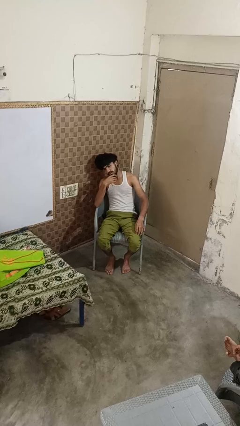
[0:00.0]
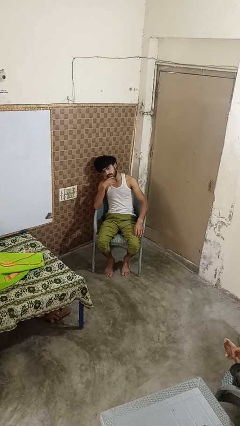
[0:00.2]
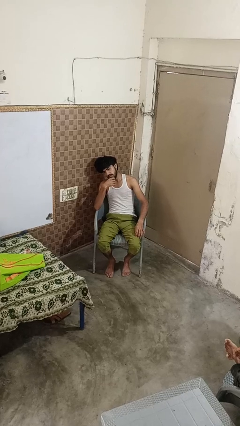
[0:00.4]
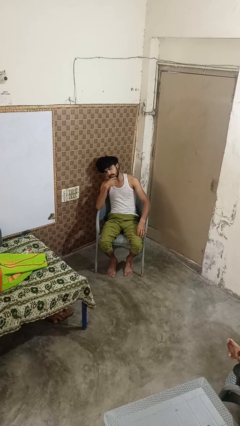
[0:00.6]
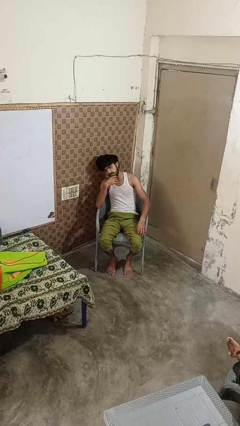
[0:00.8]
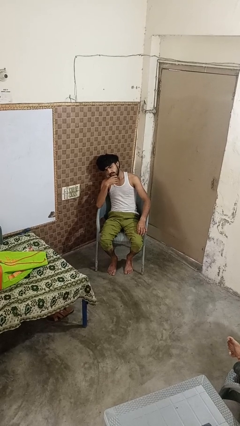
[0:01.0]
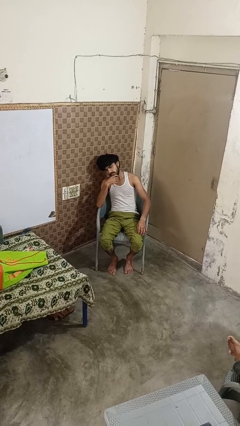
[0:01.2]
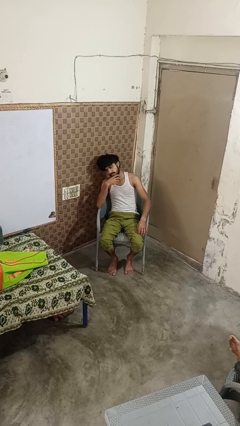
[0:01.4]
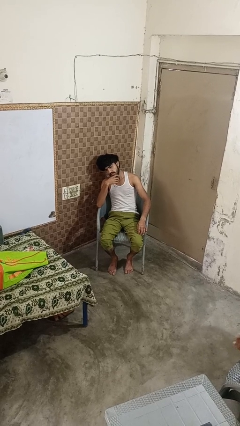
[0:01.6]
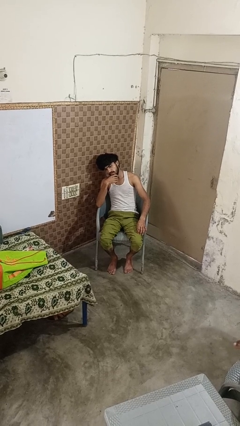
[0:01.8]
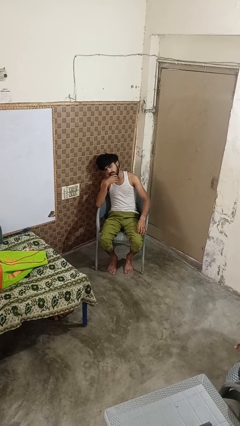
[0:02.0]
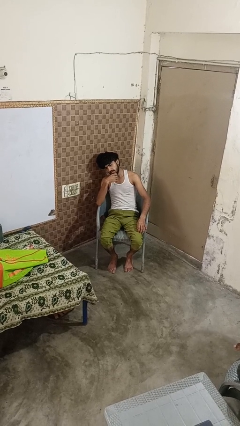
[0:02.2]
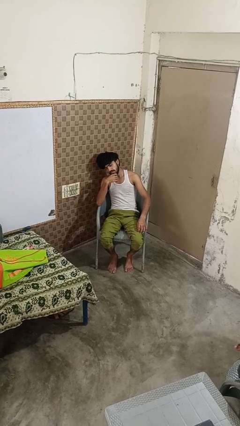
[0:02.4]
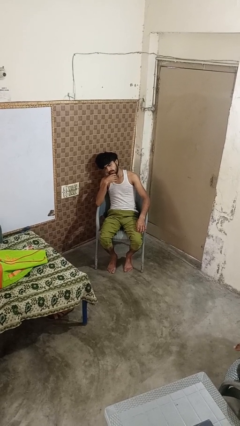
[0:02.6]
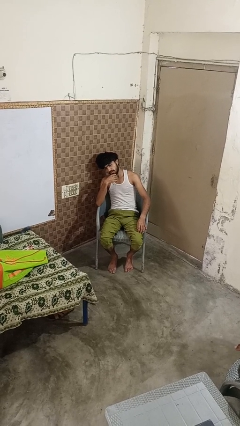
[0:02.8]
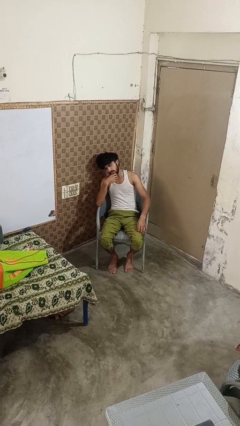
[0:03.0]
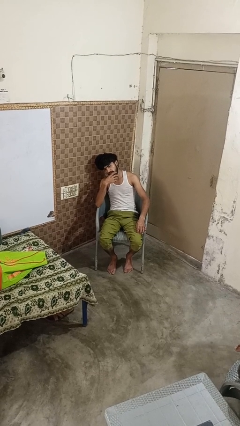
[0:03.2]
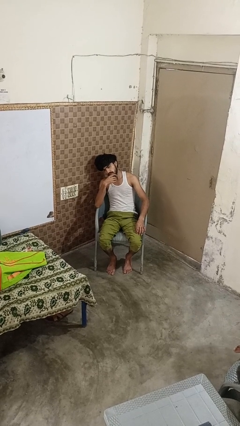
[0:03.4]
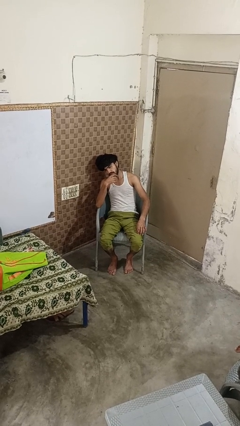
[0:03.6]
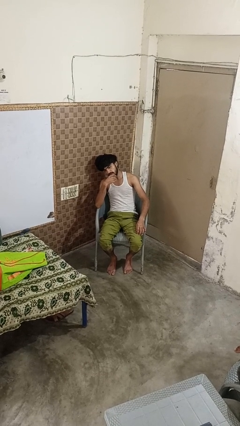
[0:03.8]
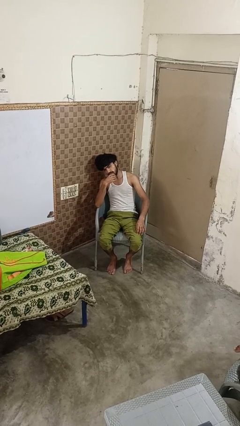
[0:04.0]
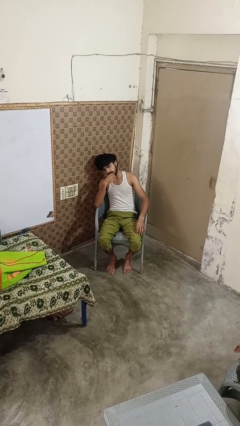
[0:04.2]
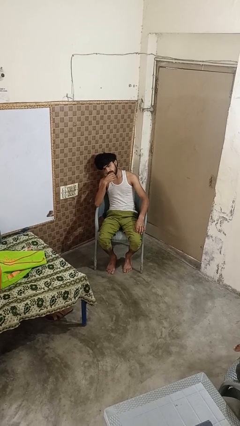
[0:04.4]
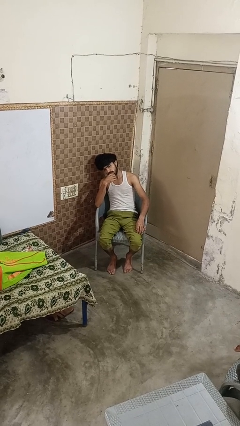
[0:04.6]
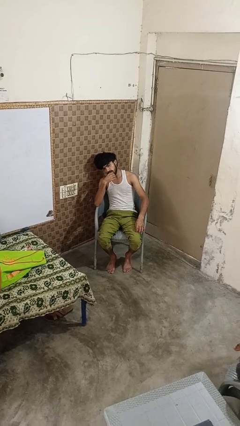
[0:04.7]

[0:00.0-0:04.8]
person strokes chin

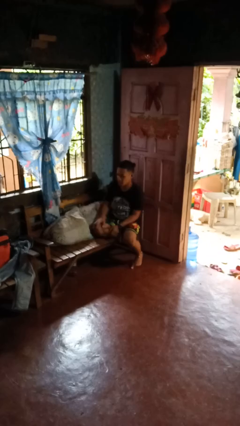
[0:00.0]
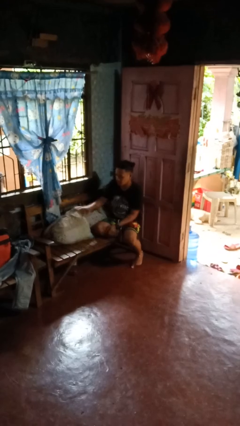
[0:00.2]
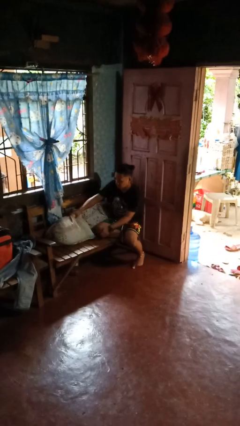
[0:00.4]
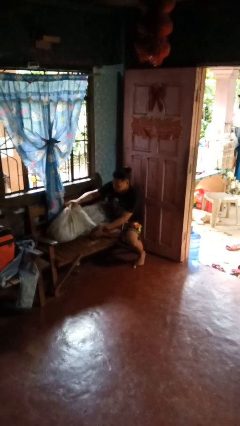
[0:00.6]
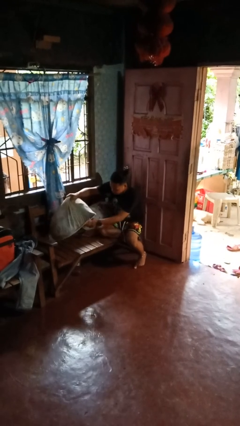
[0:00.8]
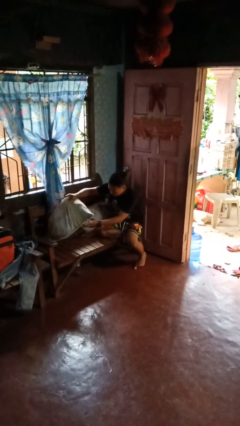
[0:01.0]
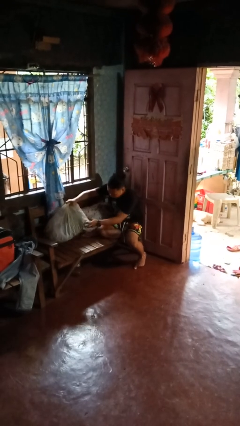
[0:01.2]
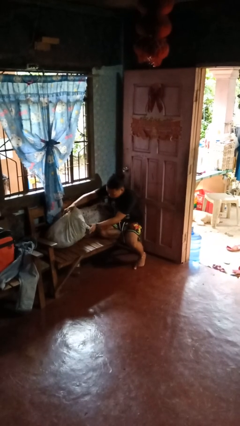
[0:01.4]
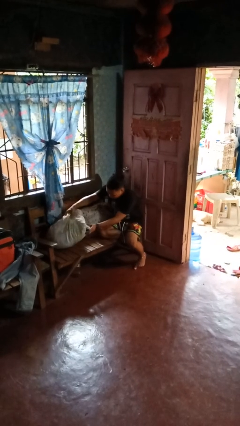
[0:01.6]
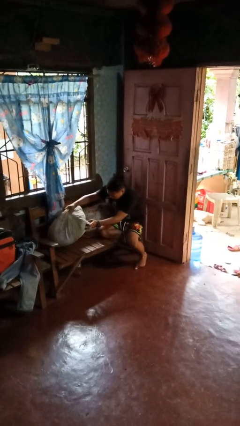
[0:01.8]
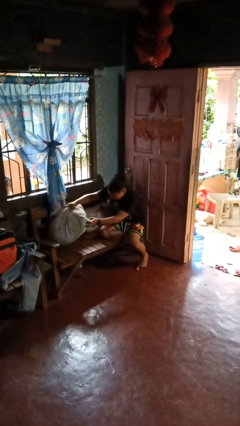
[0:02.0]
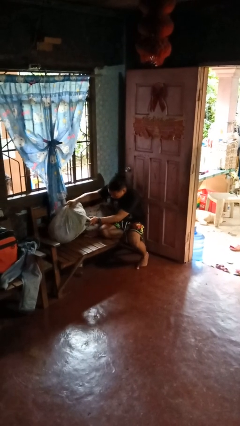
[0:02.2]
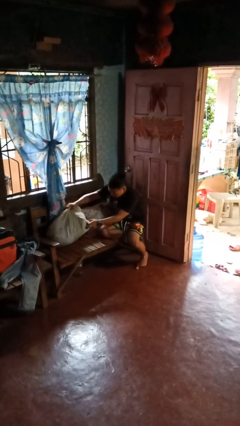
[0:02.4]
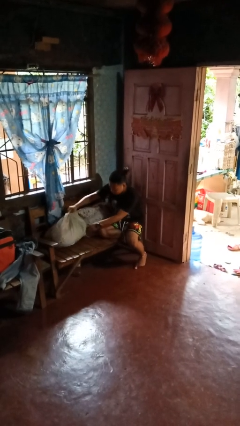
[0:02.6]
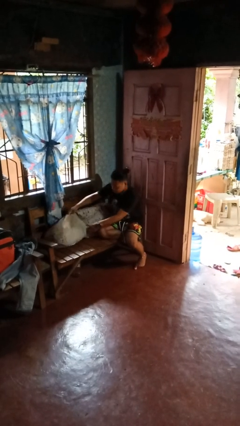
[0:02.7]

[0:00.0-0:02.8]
person searches in couch

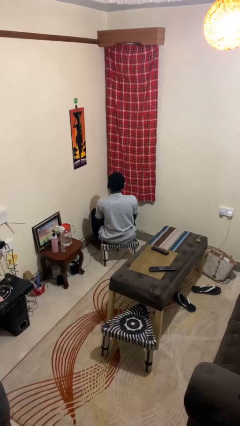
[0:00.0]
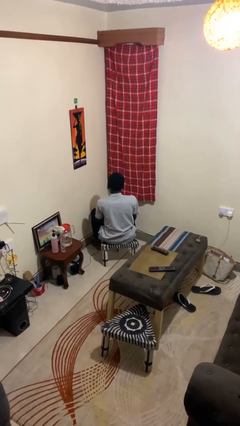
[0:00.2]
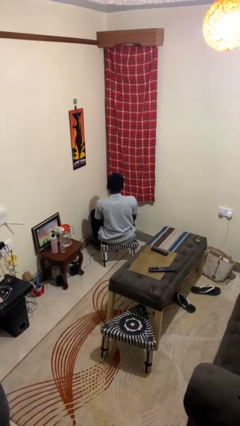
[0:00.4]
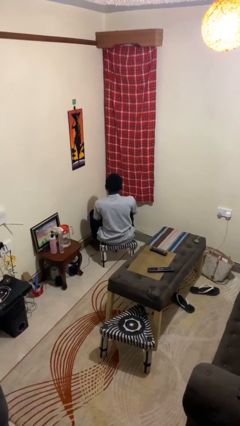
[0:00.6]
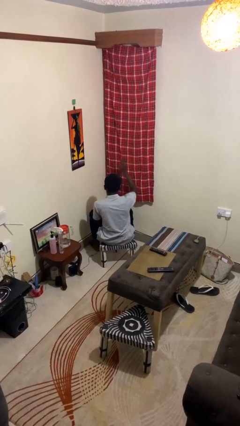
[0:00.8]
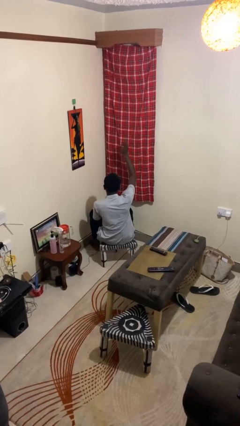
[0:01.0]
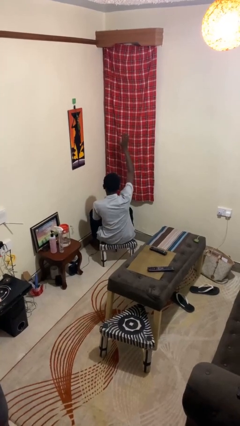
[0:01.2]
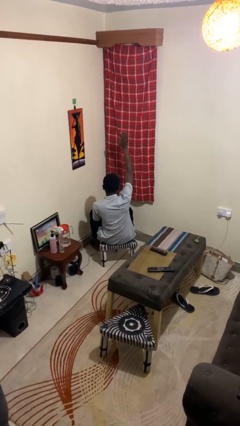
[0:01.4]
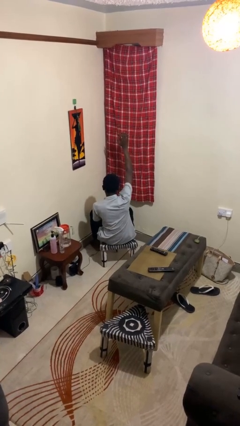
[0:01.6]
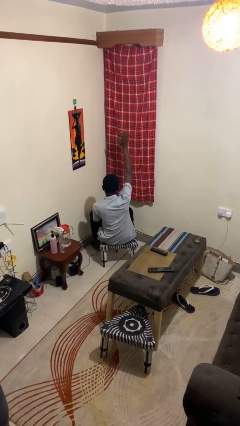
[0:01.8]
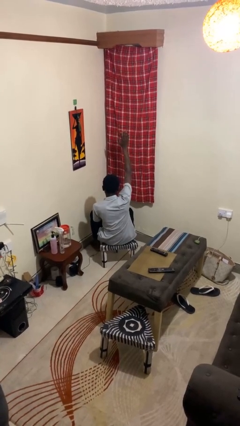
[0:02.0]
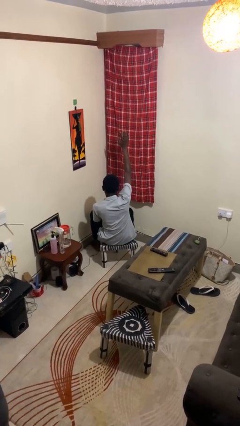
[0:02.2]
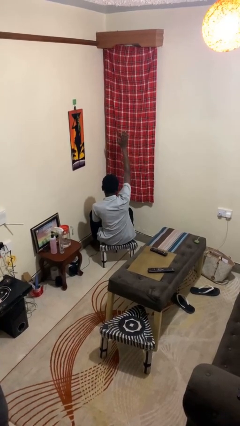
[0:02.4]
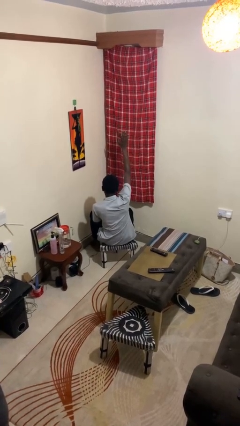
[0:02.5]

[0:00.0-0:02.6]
person gestures raise hand

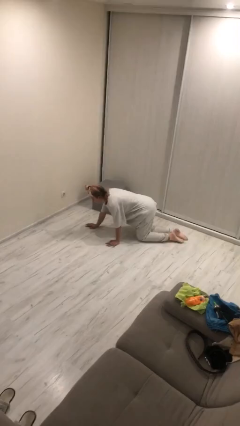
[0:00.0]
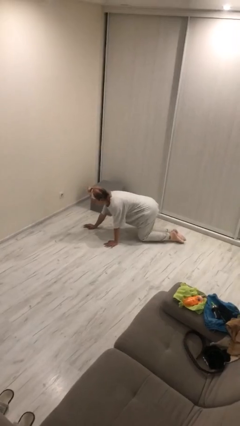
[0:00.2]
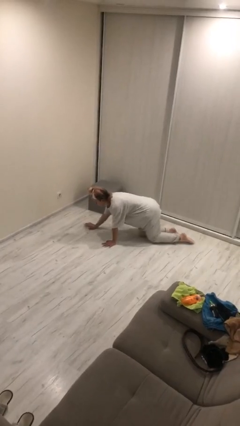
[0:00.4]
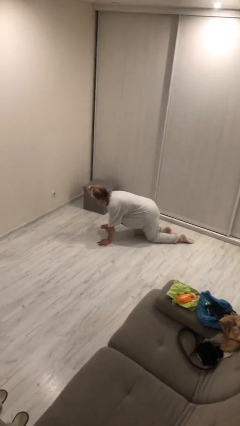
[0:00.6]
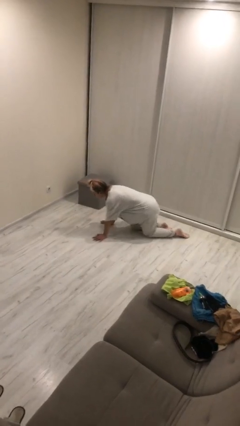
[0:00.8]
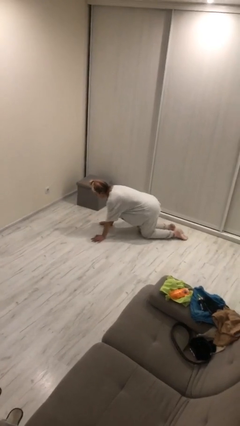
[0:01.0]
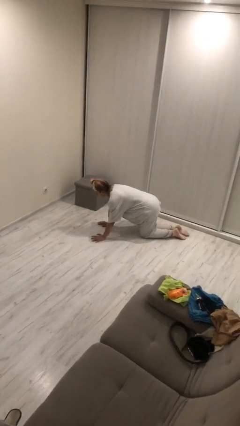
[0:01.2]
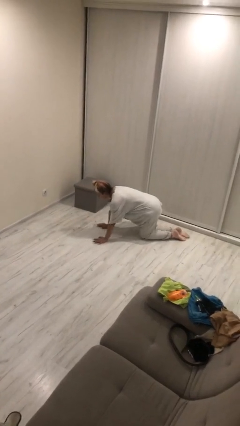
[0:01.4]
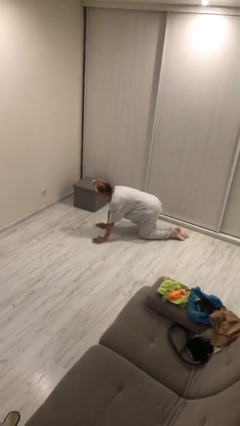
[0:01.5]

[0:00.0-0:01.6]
person crawls

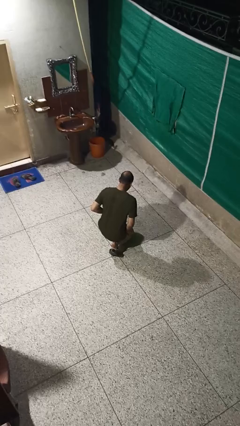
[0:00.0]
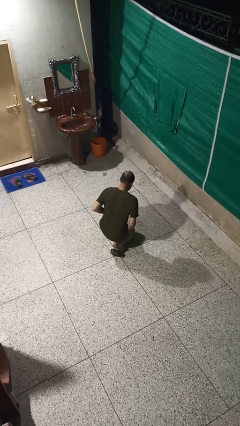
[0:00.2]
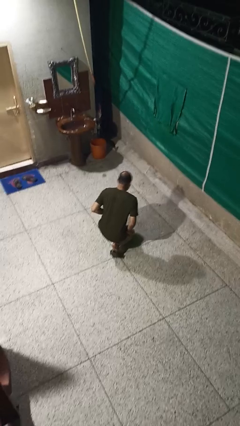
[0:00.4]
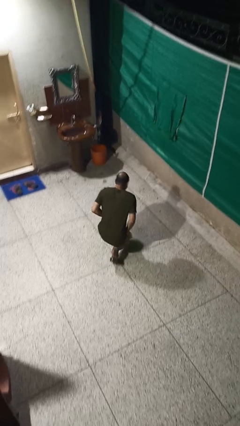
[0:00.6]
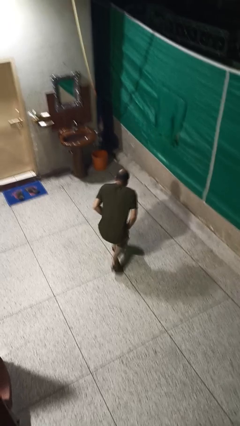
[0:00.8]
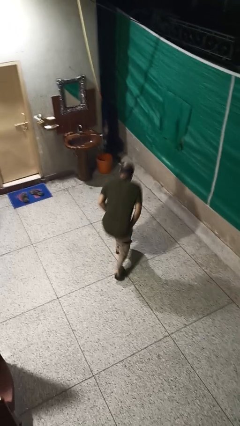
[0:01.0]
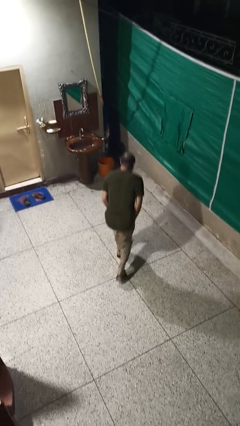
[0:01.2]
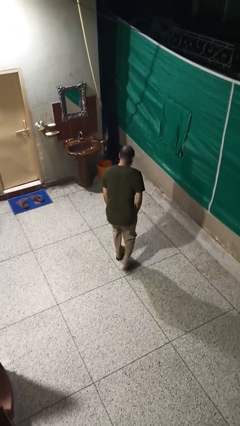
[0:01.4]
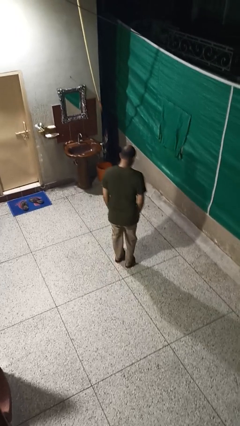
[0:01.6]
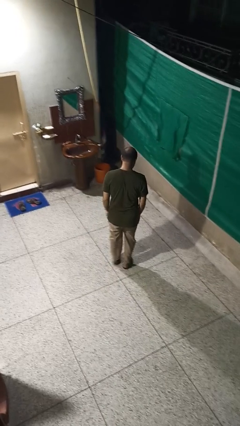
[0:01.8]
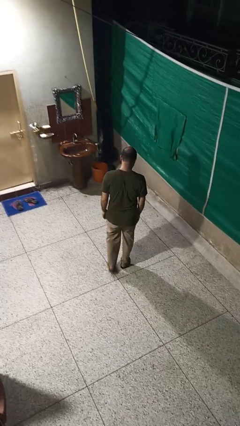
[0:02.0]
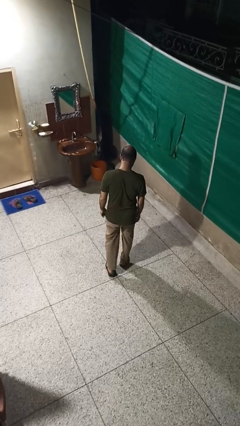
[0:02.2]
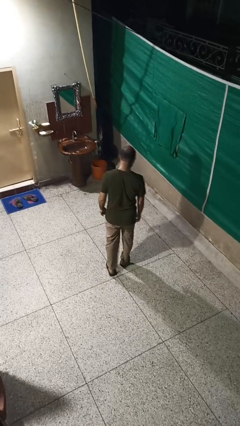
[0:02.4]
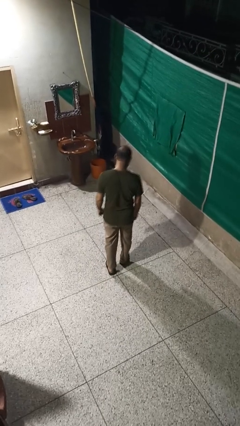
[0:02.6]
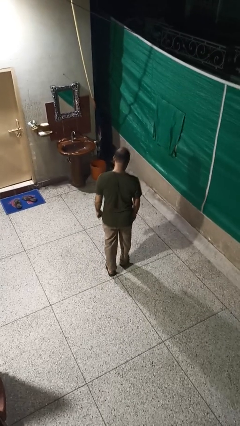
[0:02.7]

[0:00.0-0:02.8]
person stands up from floor

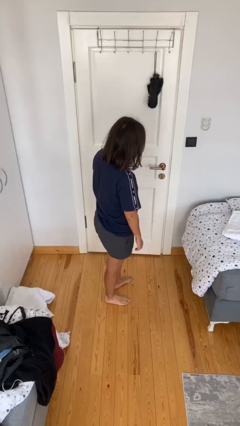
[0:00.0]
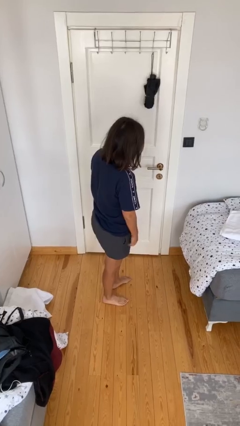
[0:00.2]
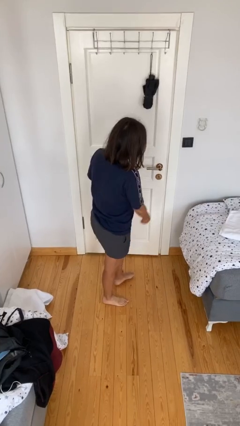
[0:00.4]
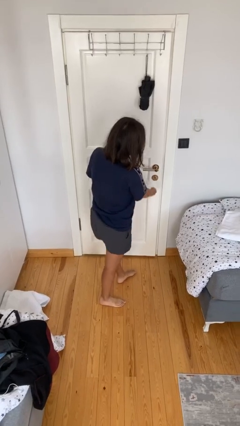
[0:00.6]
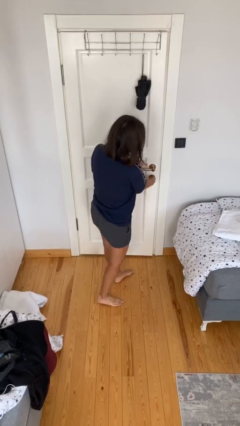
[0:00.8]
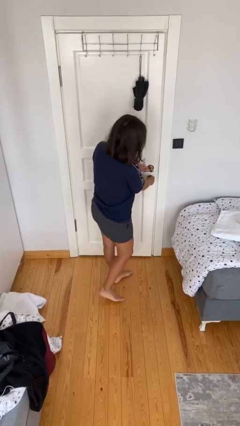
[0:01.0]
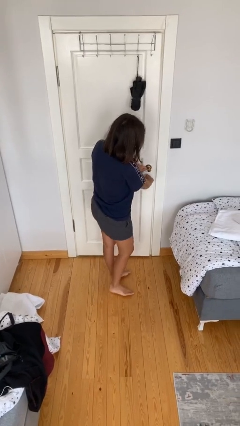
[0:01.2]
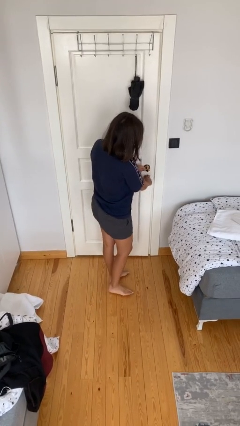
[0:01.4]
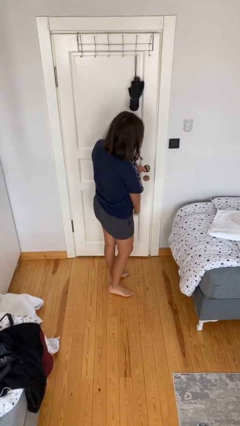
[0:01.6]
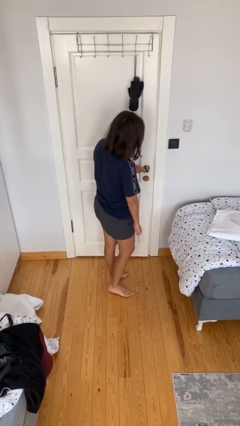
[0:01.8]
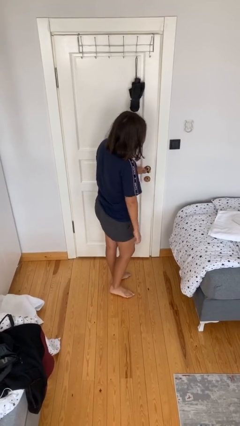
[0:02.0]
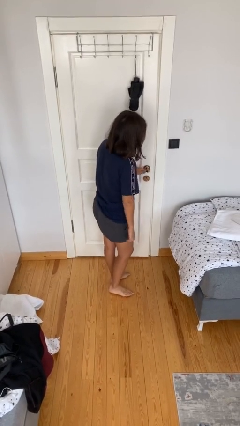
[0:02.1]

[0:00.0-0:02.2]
person unlocks door with keys

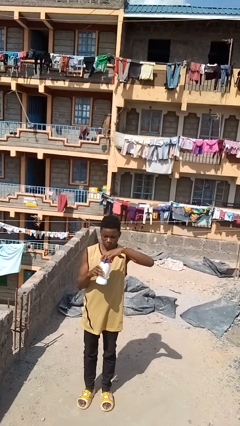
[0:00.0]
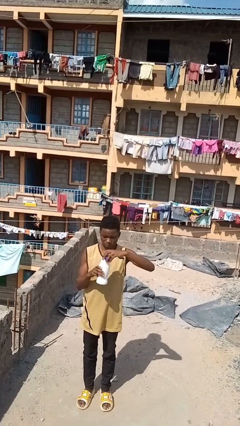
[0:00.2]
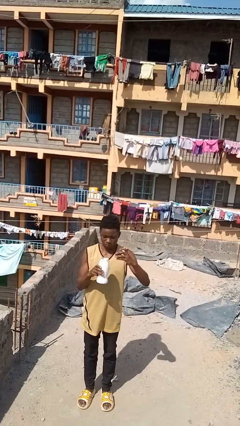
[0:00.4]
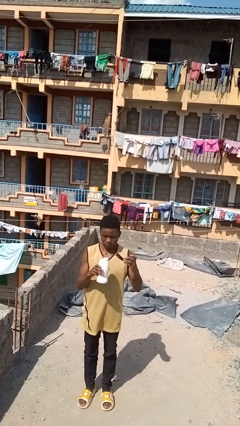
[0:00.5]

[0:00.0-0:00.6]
person opens beverage can
